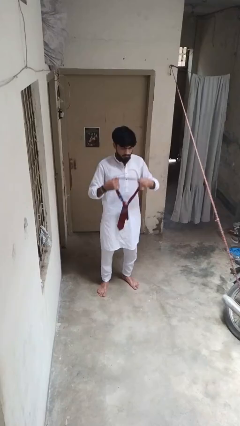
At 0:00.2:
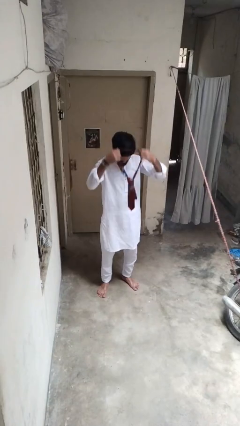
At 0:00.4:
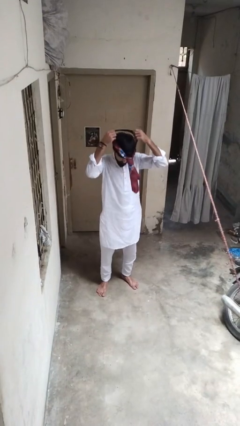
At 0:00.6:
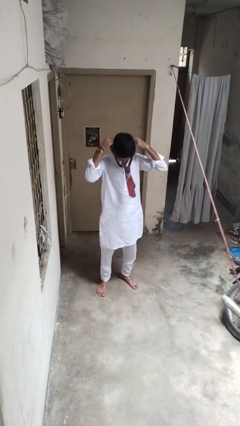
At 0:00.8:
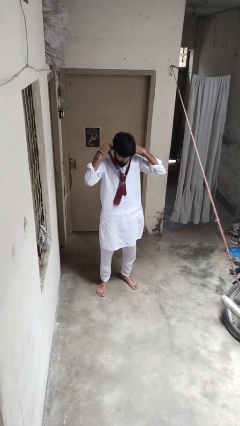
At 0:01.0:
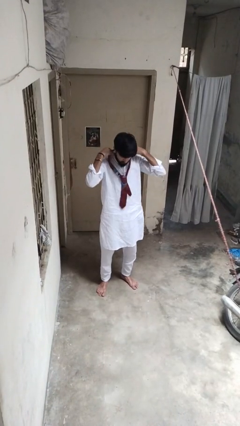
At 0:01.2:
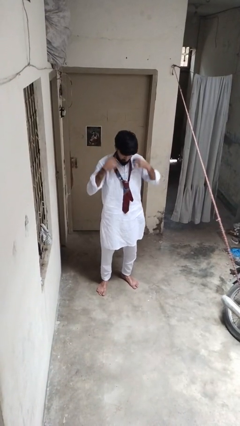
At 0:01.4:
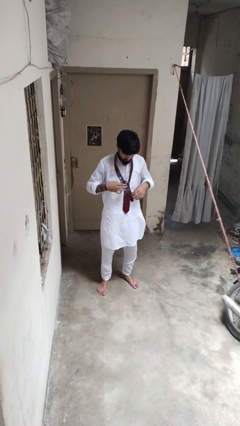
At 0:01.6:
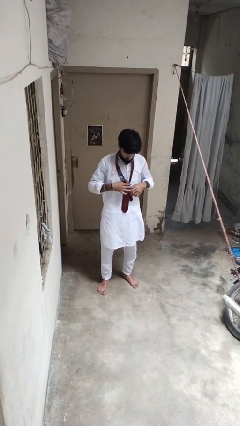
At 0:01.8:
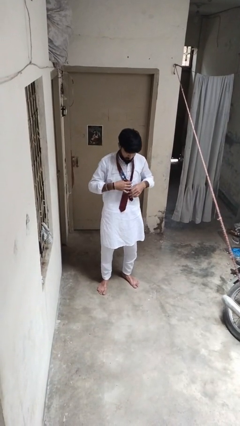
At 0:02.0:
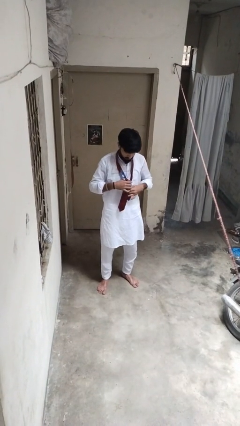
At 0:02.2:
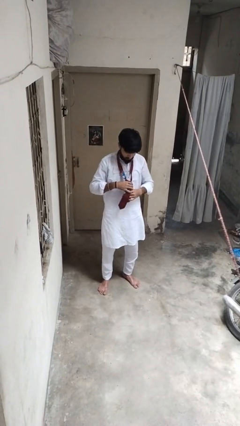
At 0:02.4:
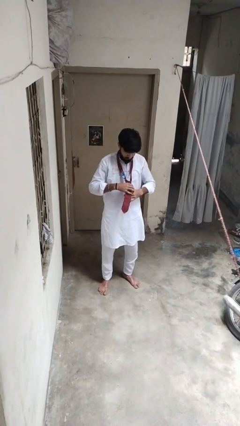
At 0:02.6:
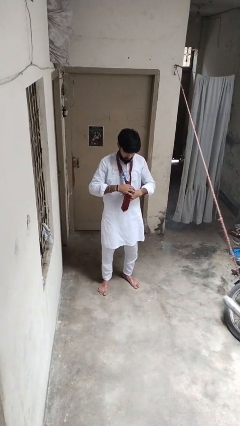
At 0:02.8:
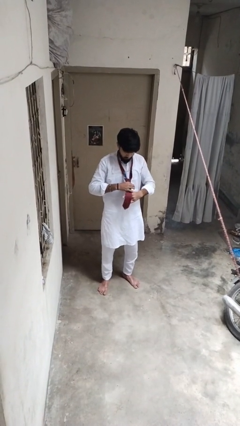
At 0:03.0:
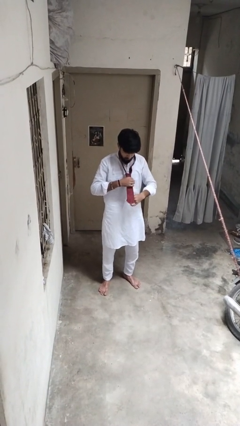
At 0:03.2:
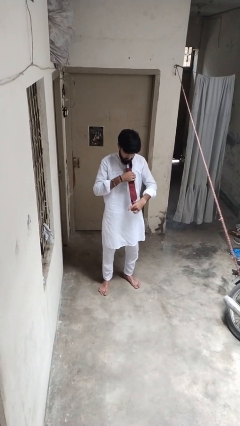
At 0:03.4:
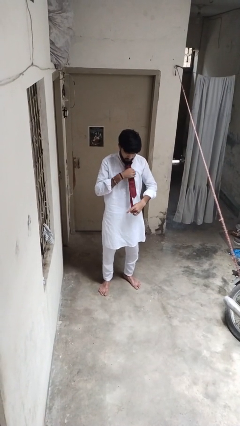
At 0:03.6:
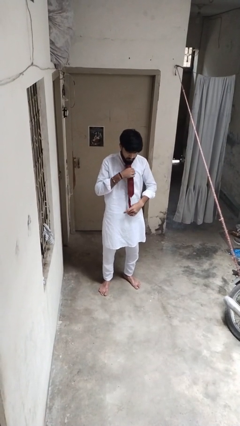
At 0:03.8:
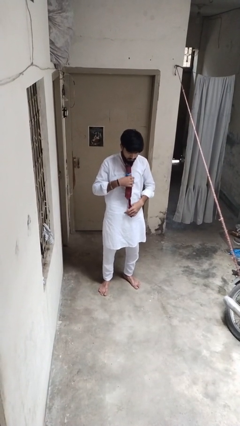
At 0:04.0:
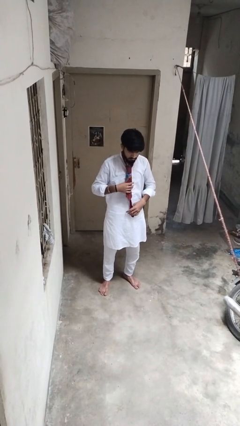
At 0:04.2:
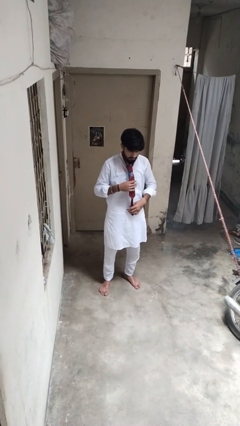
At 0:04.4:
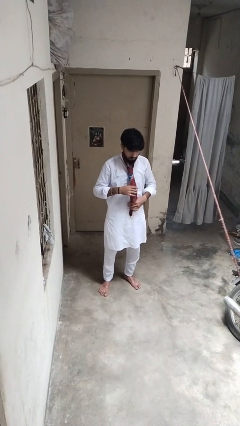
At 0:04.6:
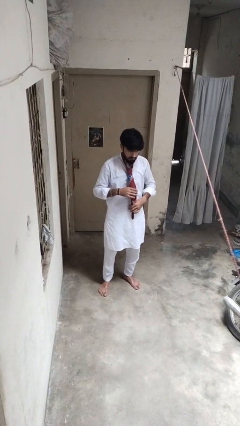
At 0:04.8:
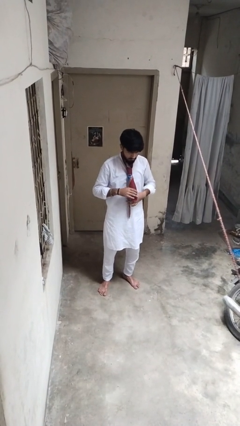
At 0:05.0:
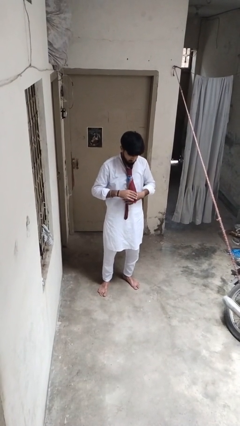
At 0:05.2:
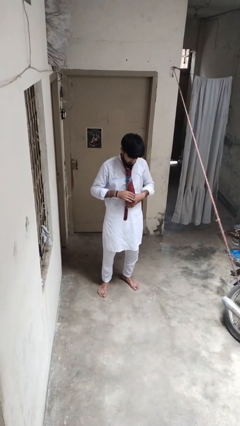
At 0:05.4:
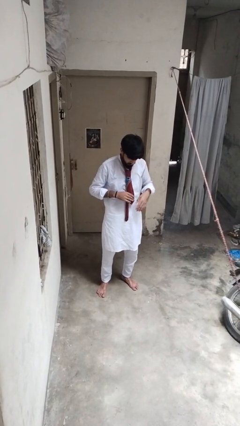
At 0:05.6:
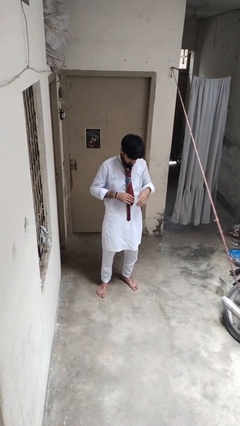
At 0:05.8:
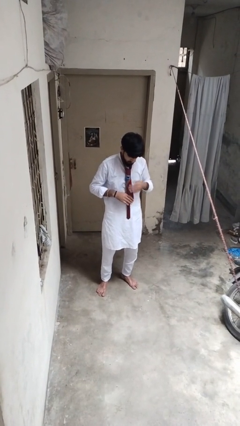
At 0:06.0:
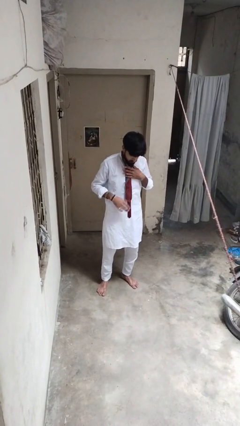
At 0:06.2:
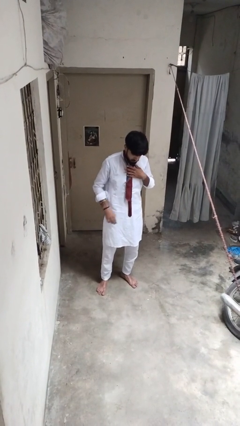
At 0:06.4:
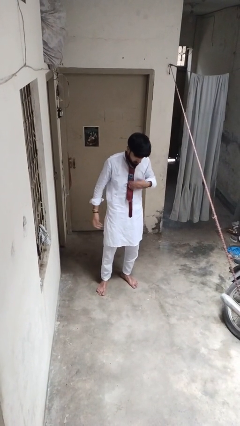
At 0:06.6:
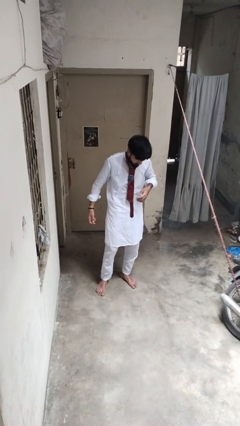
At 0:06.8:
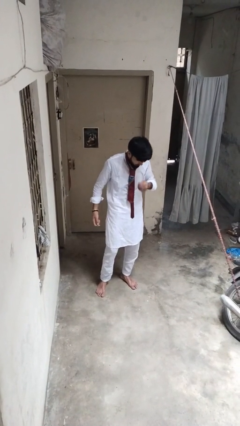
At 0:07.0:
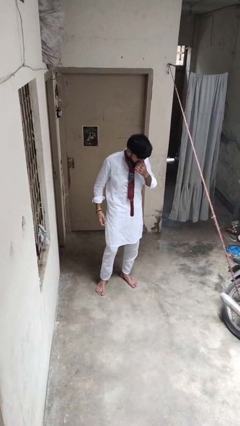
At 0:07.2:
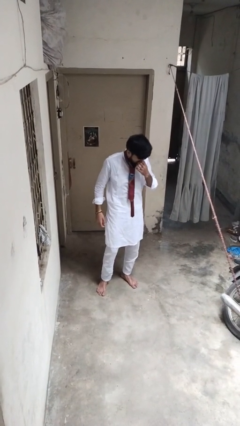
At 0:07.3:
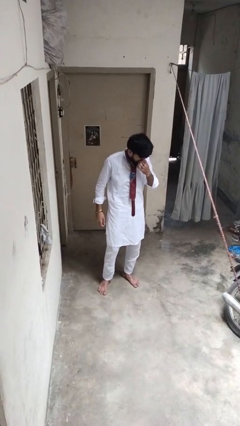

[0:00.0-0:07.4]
person puts on necktie

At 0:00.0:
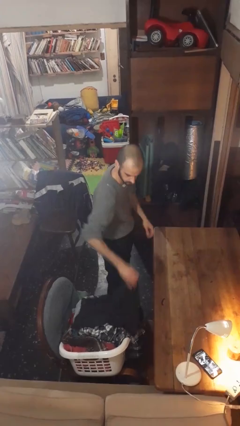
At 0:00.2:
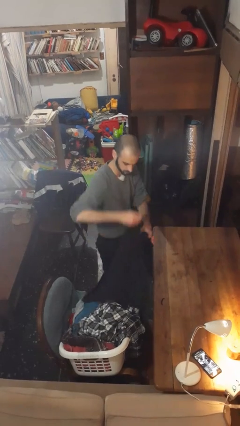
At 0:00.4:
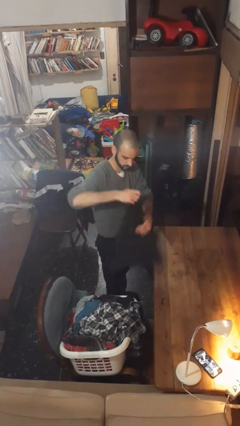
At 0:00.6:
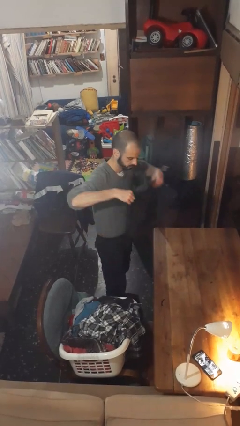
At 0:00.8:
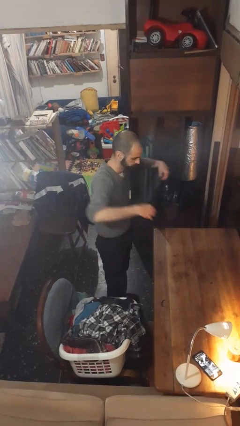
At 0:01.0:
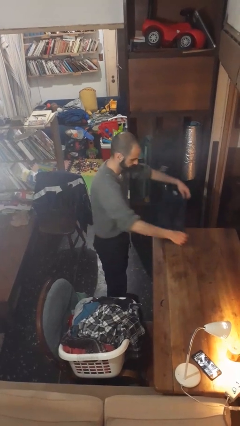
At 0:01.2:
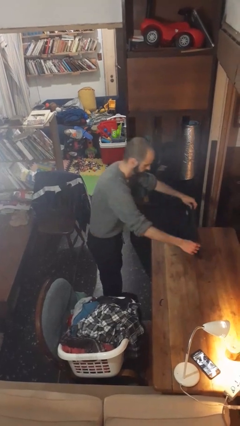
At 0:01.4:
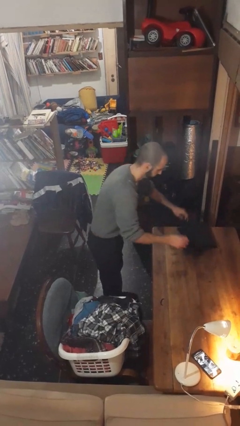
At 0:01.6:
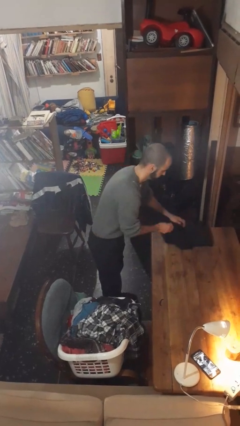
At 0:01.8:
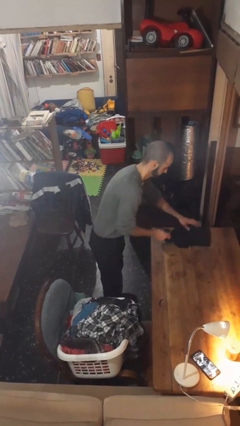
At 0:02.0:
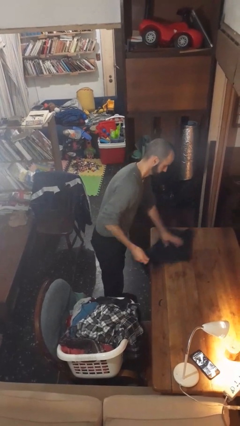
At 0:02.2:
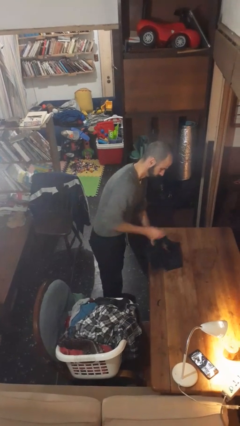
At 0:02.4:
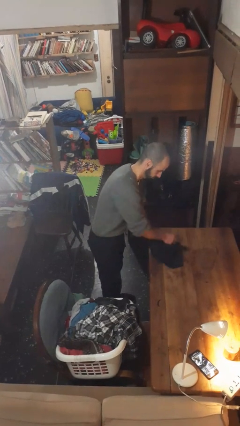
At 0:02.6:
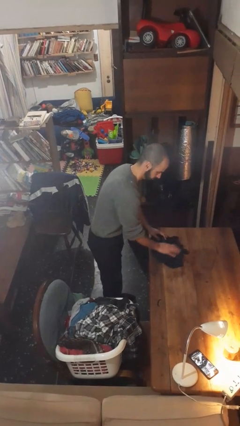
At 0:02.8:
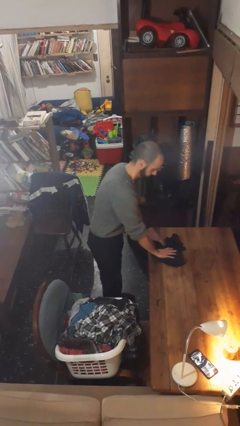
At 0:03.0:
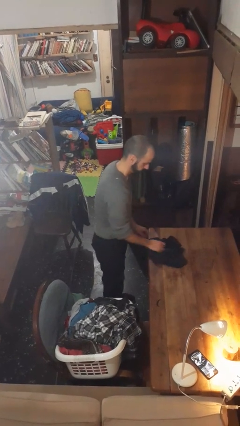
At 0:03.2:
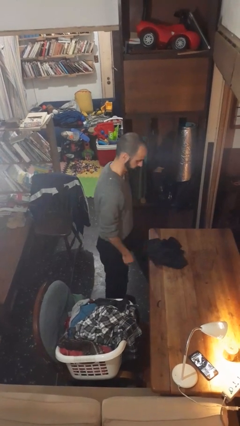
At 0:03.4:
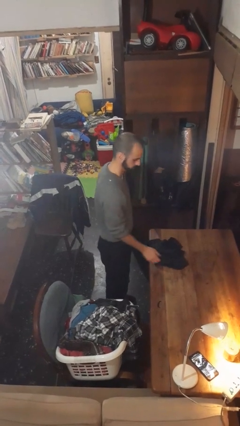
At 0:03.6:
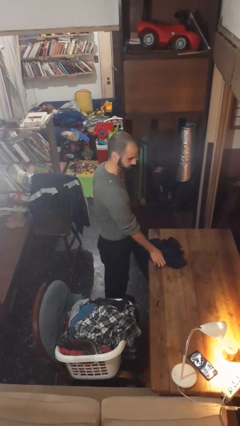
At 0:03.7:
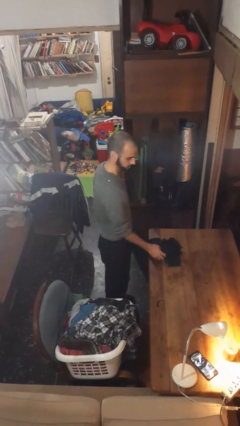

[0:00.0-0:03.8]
person folds shirt

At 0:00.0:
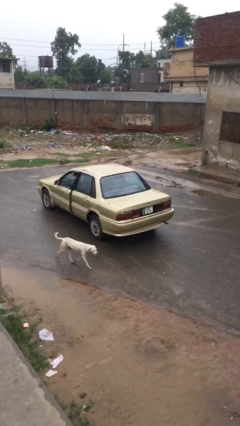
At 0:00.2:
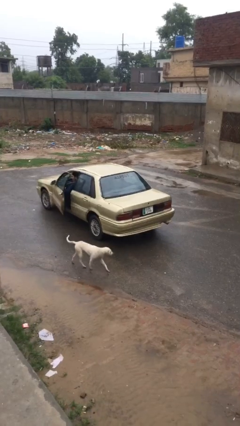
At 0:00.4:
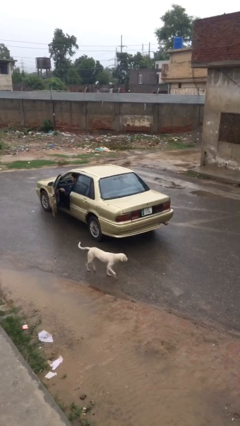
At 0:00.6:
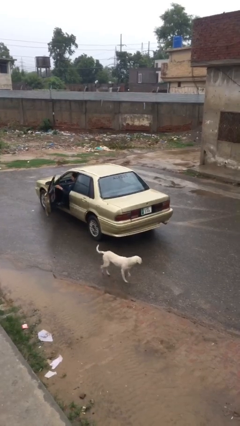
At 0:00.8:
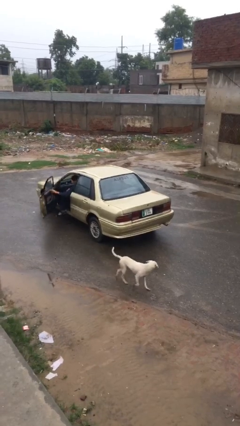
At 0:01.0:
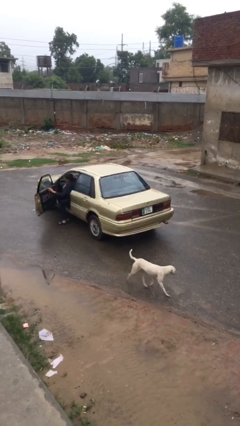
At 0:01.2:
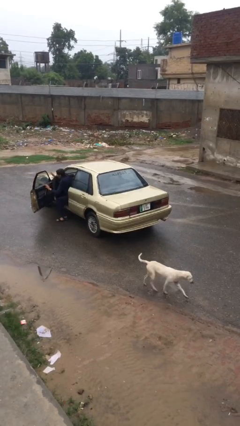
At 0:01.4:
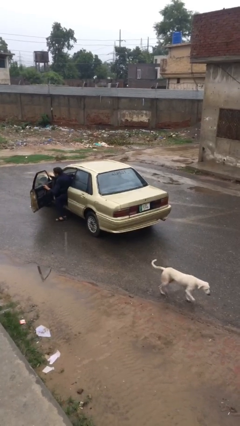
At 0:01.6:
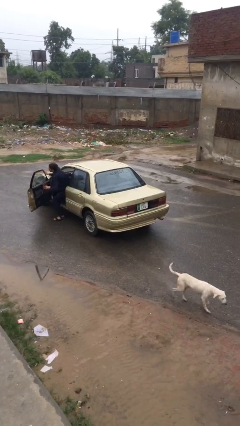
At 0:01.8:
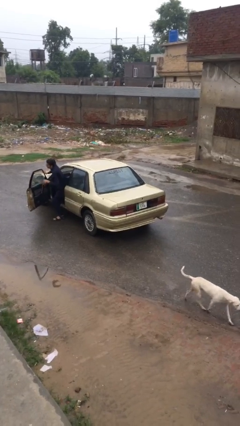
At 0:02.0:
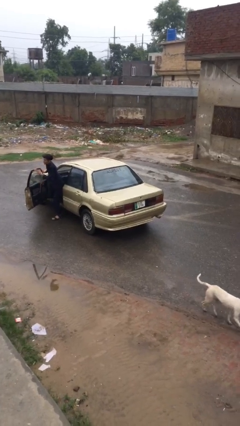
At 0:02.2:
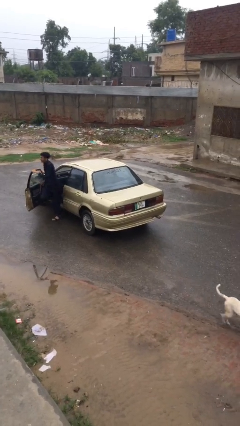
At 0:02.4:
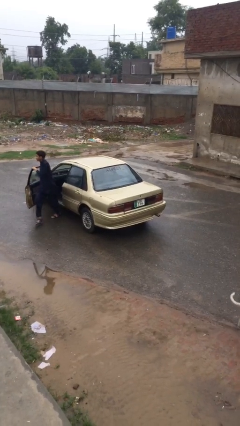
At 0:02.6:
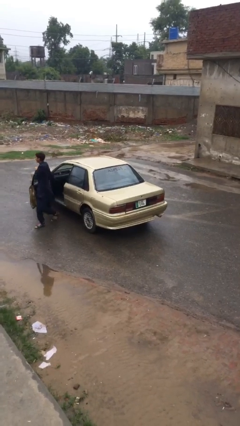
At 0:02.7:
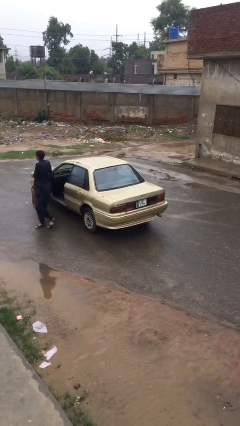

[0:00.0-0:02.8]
car drops off person

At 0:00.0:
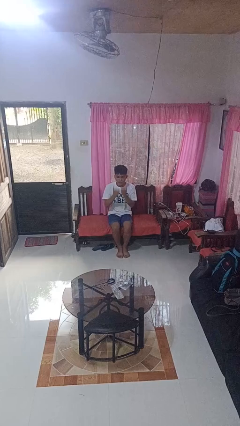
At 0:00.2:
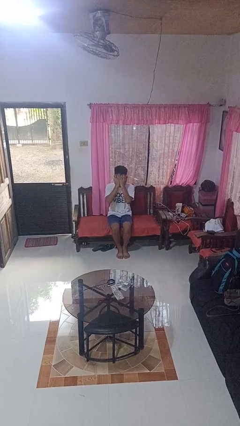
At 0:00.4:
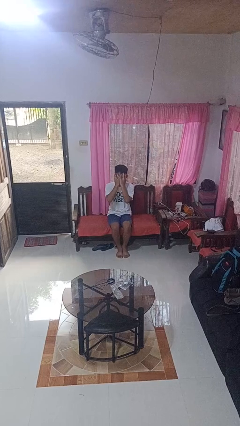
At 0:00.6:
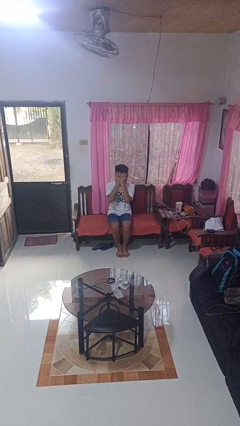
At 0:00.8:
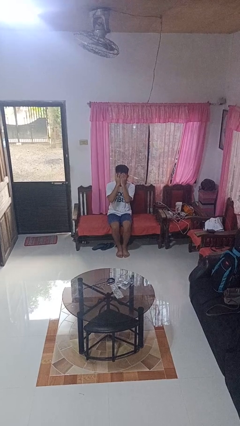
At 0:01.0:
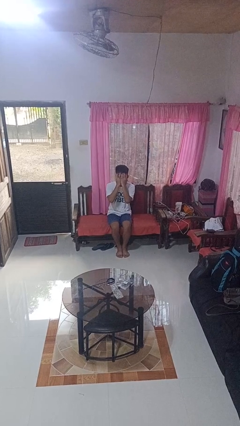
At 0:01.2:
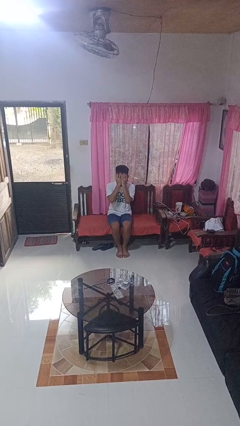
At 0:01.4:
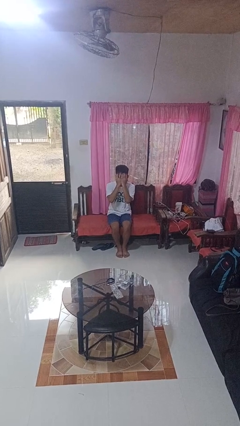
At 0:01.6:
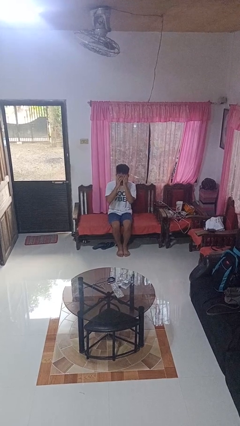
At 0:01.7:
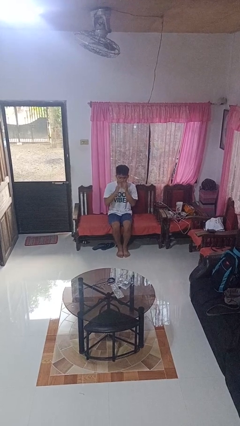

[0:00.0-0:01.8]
person covers face with hands

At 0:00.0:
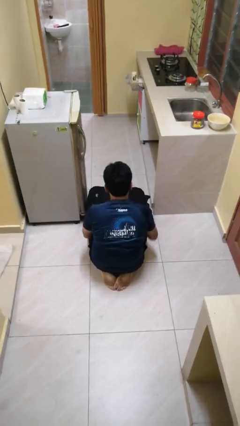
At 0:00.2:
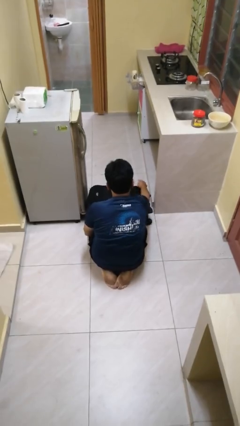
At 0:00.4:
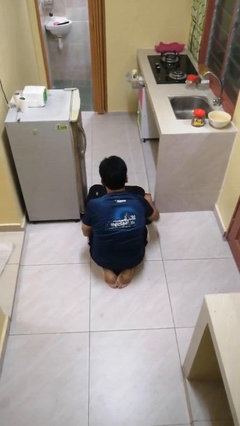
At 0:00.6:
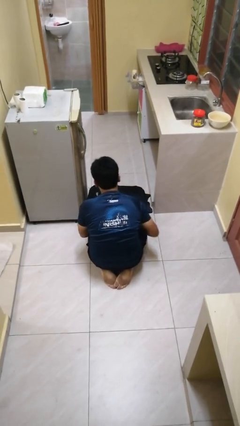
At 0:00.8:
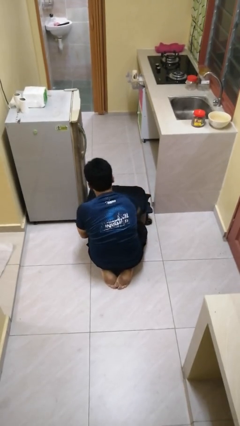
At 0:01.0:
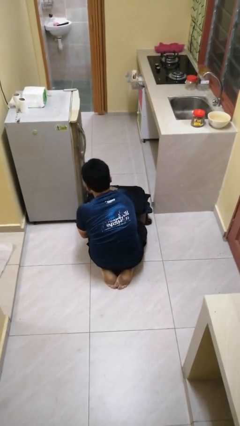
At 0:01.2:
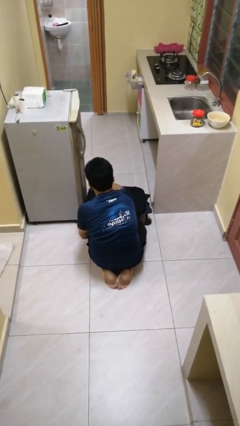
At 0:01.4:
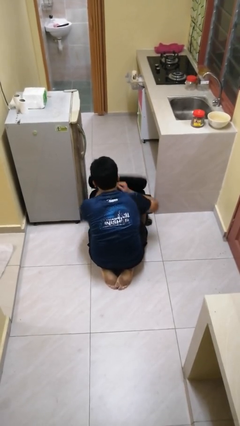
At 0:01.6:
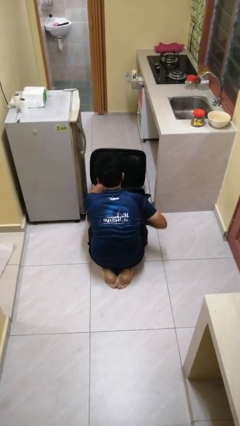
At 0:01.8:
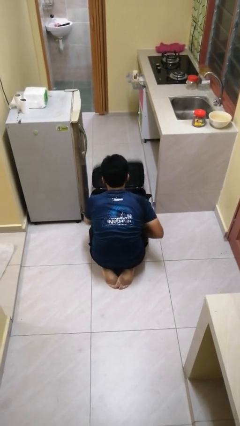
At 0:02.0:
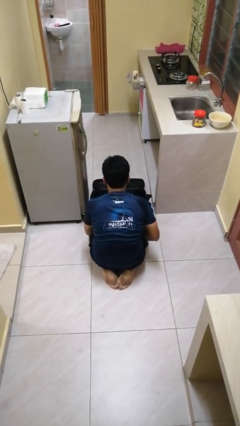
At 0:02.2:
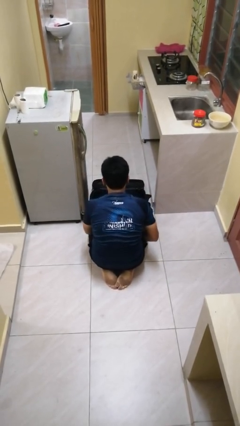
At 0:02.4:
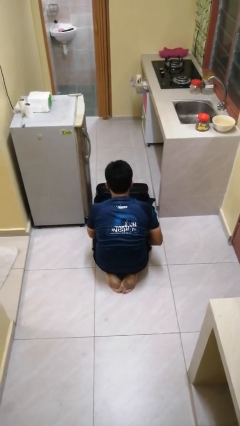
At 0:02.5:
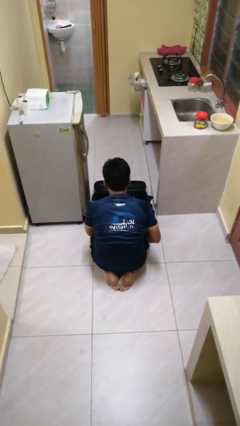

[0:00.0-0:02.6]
person opens suitcase
